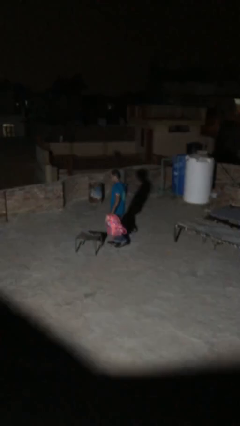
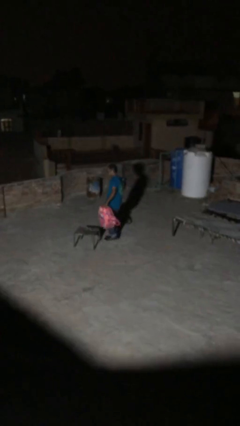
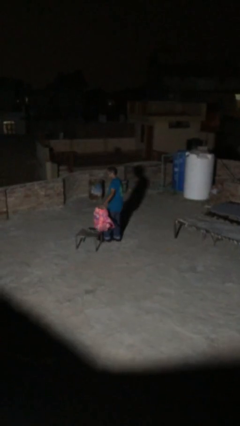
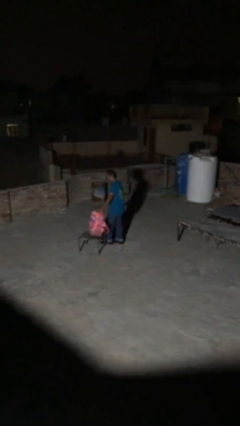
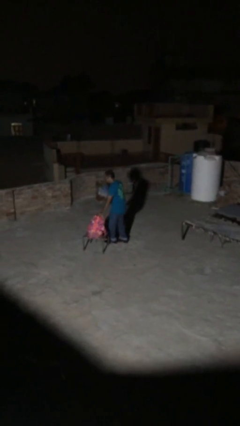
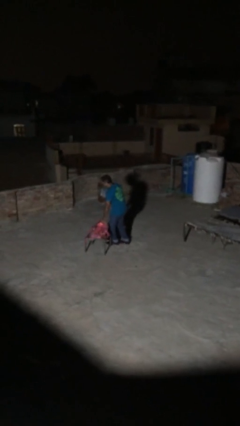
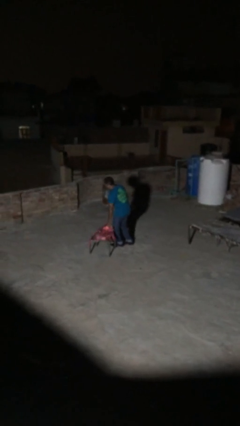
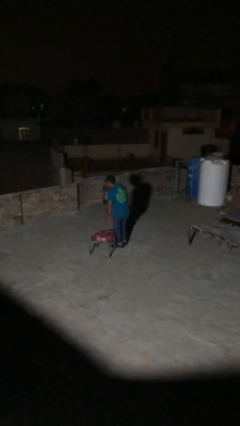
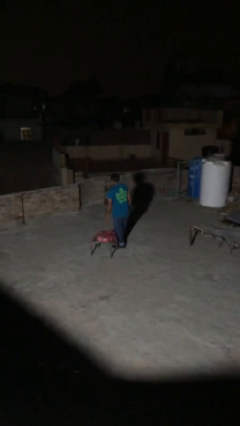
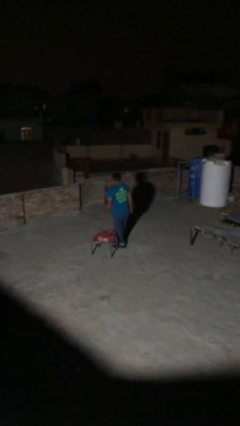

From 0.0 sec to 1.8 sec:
person puts down object on table

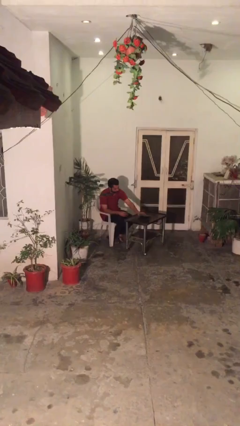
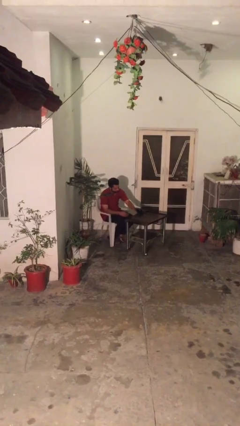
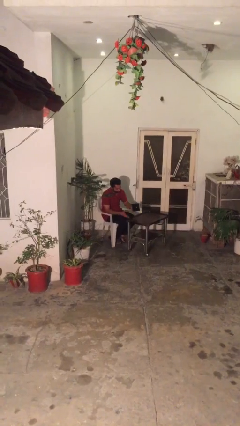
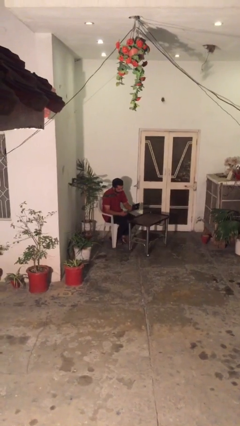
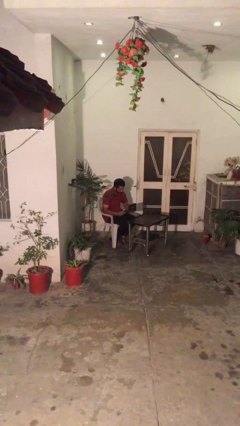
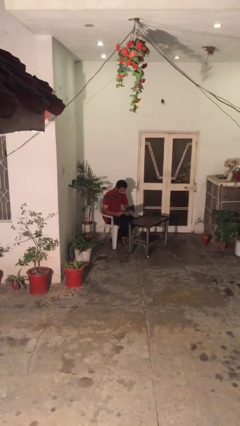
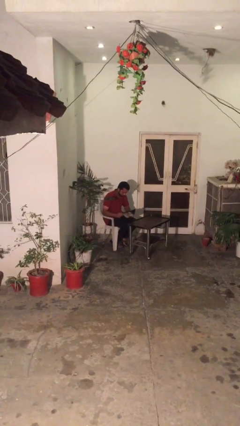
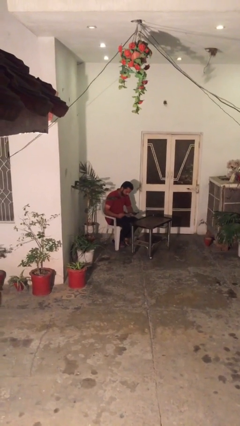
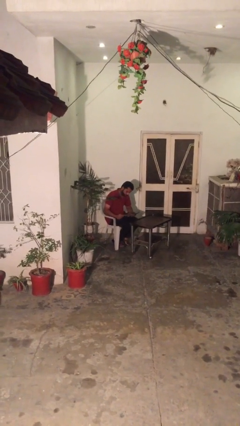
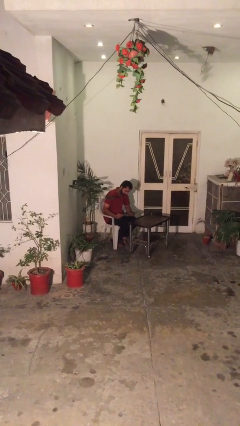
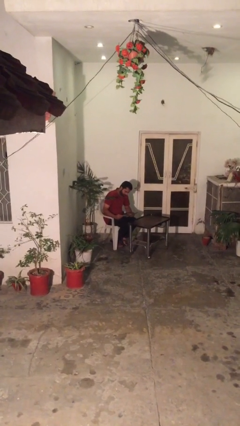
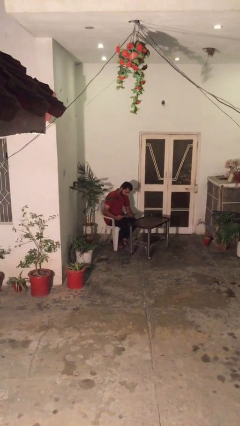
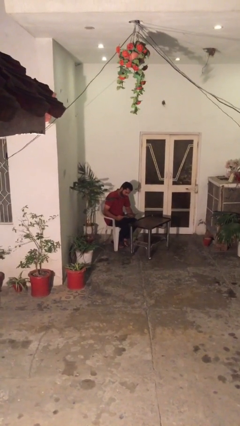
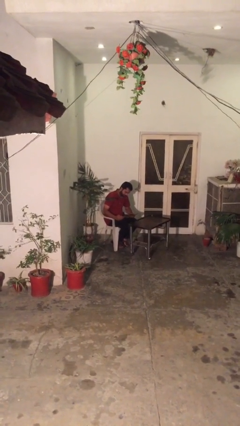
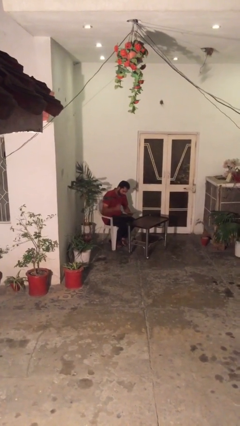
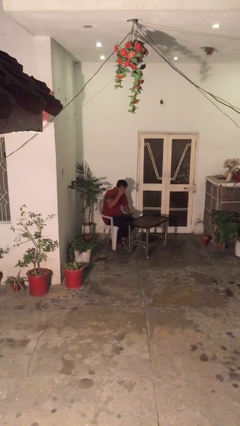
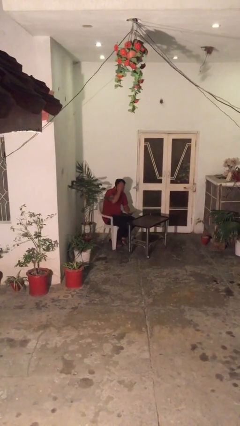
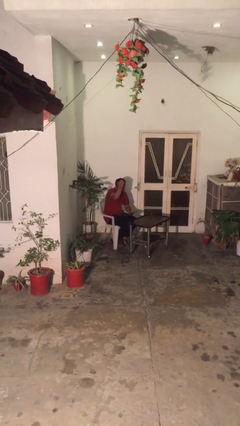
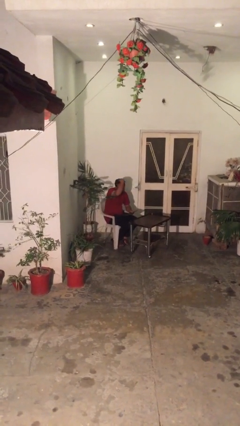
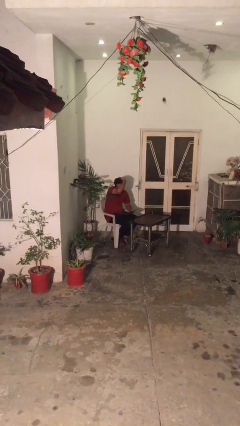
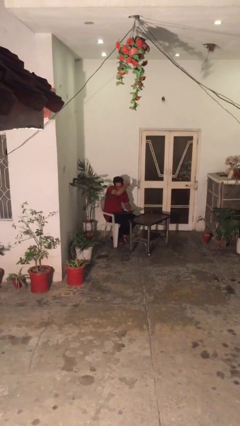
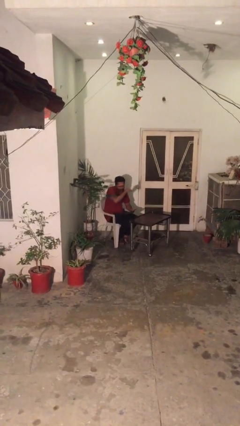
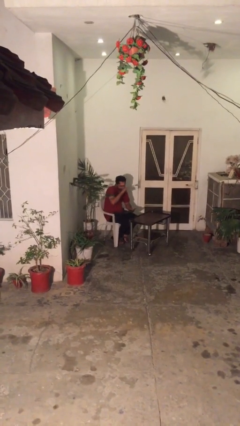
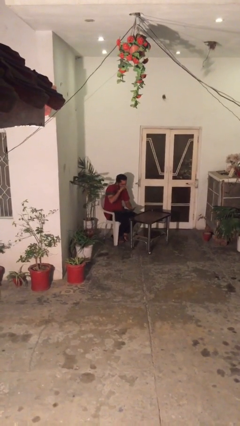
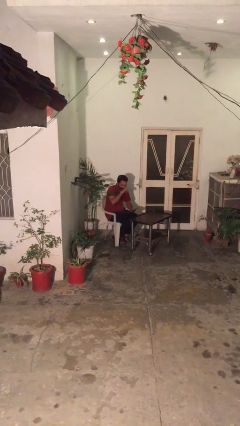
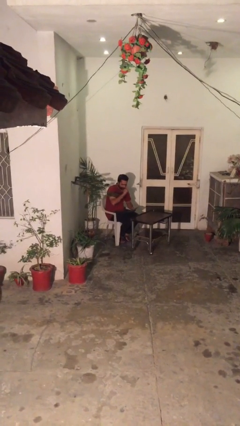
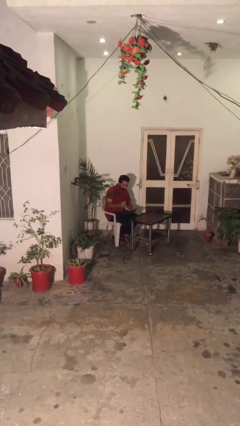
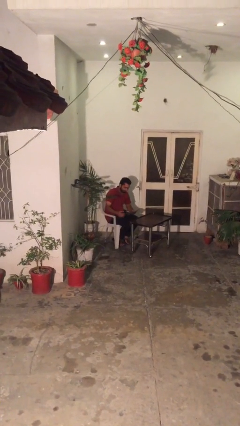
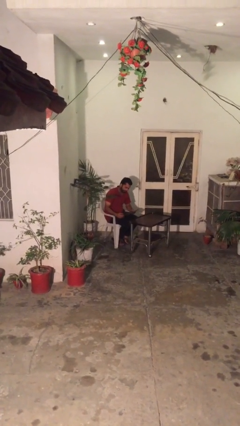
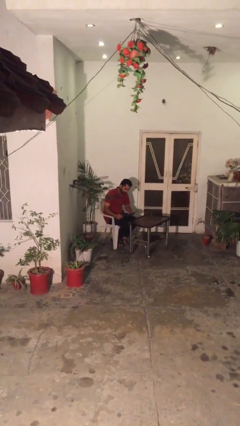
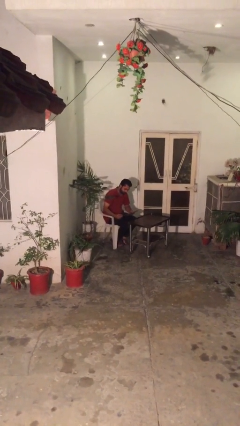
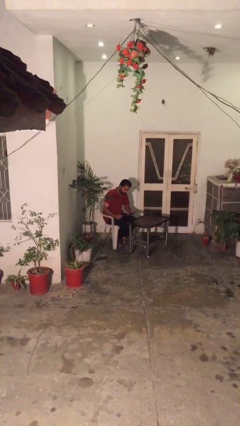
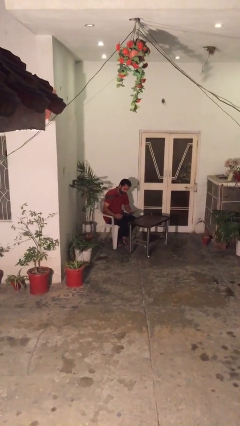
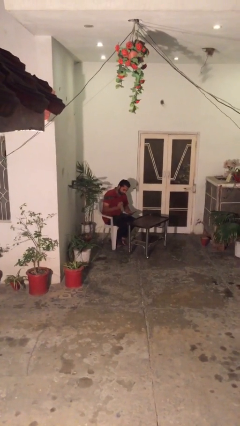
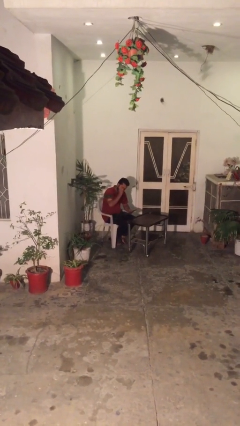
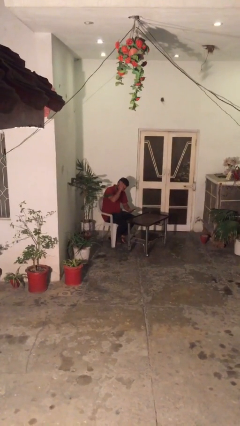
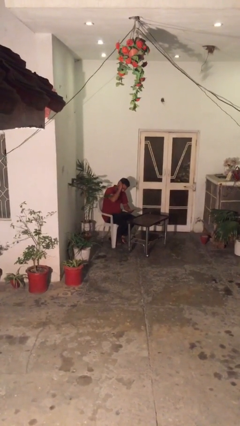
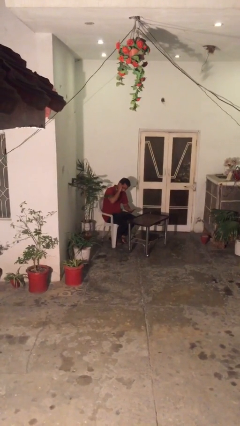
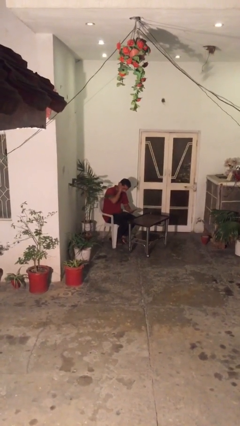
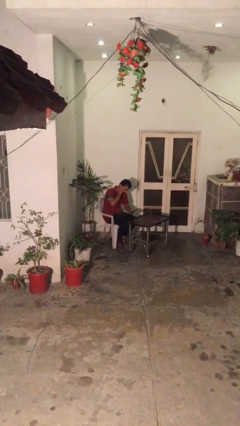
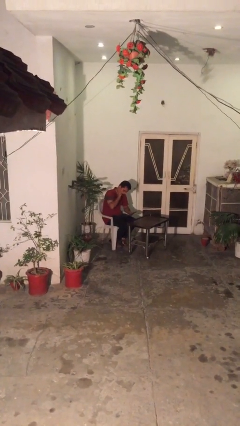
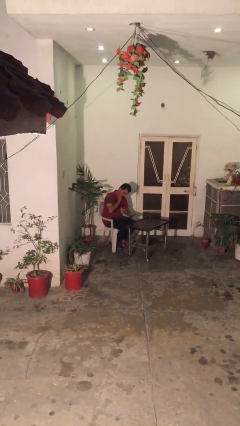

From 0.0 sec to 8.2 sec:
person reads document

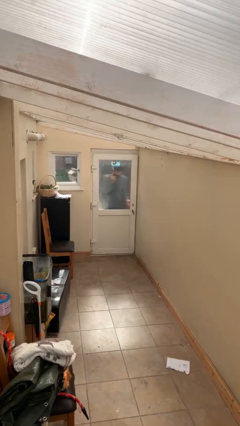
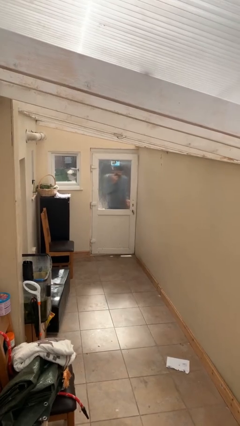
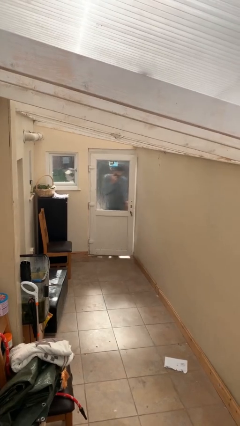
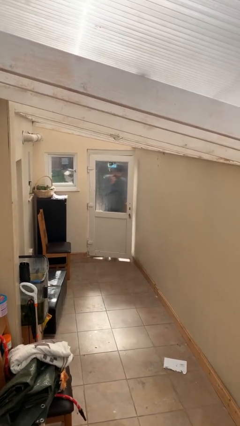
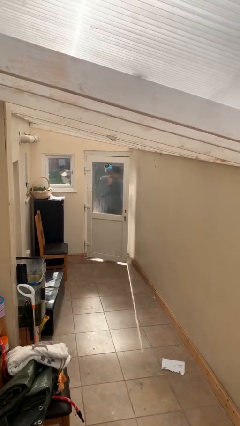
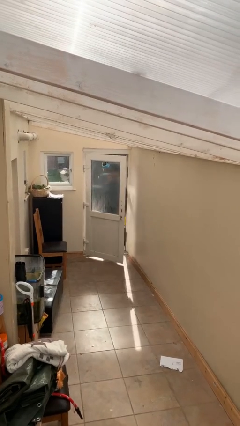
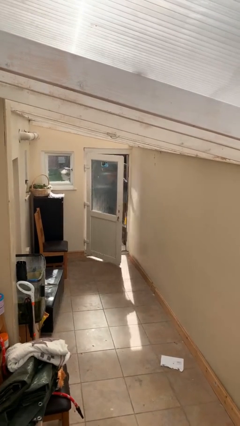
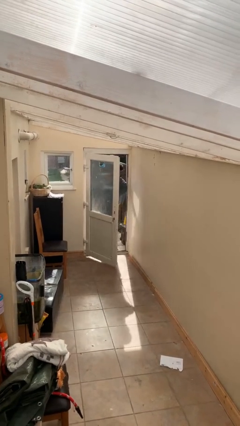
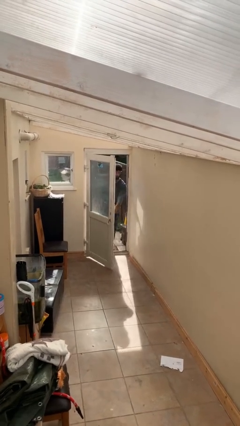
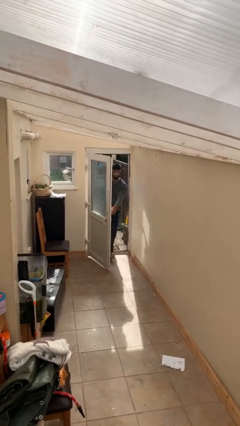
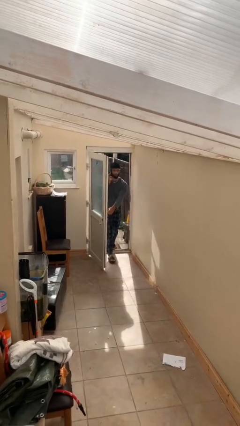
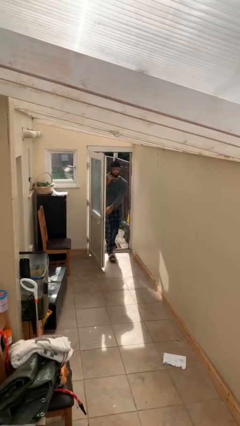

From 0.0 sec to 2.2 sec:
person opens facility door

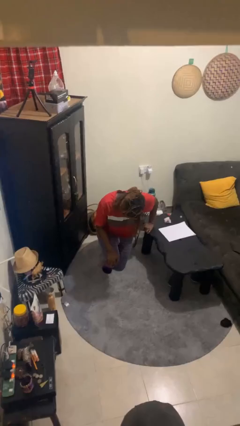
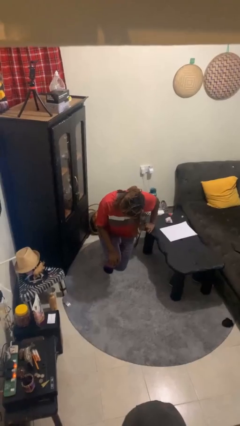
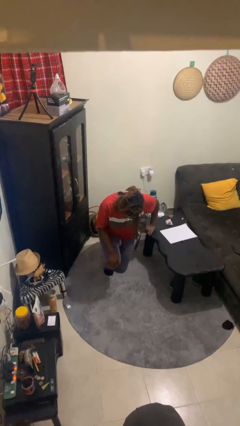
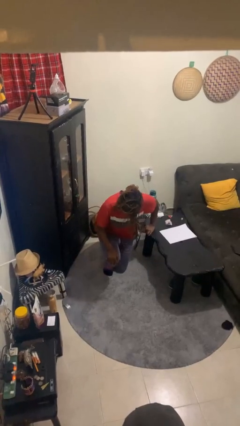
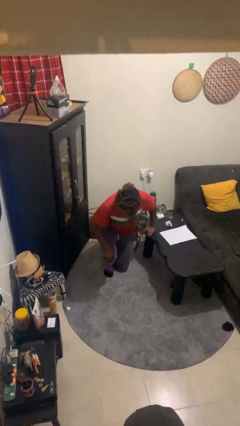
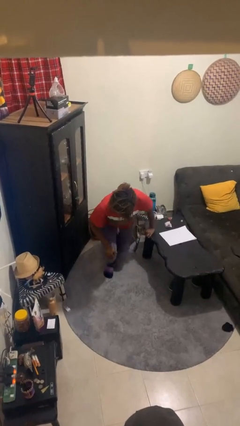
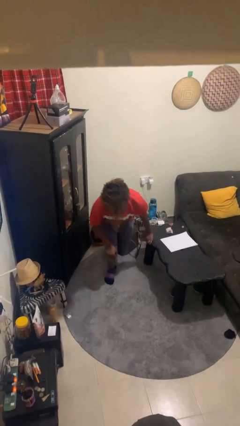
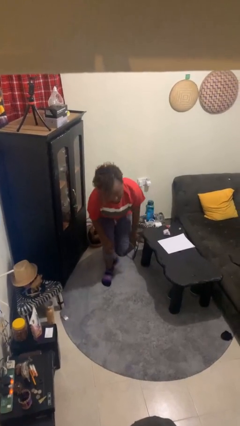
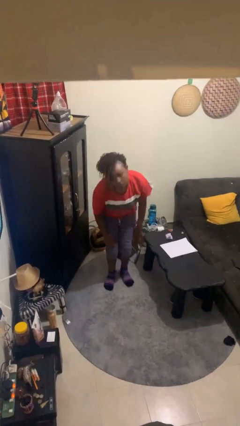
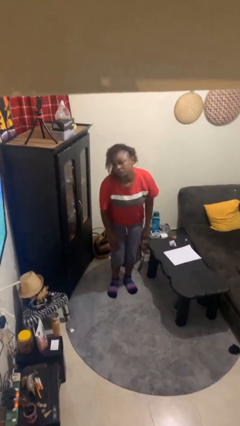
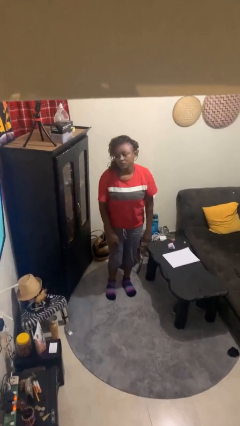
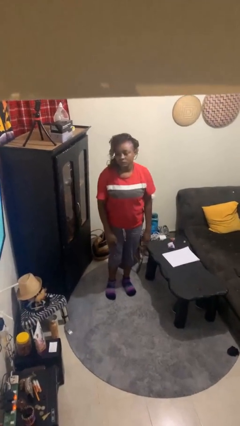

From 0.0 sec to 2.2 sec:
person stands up from floor

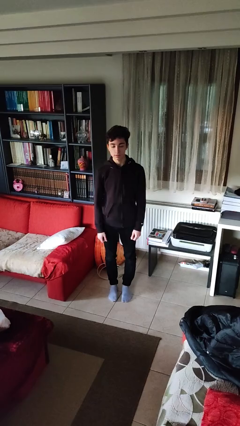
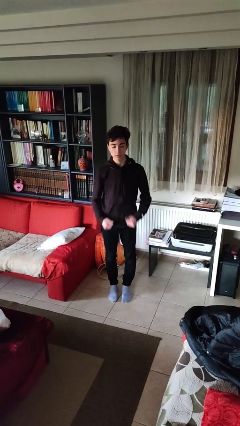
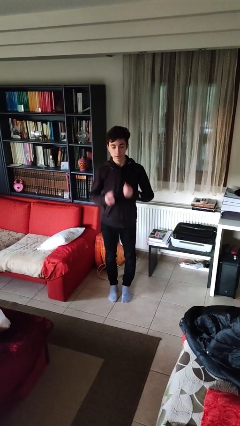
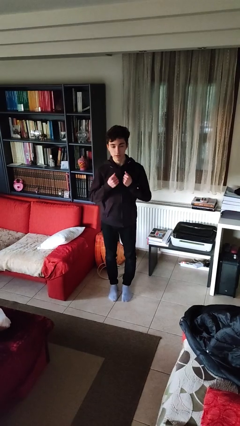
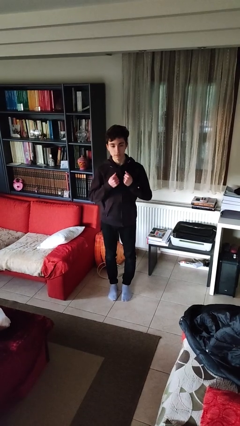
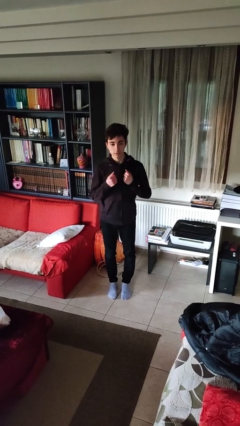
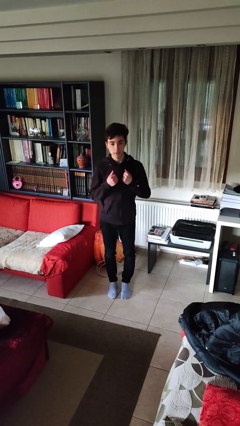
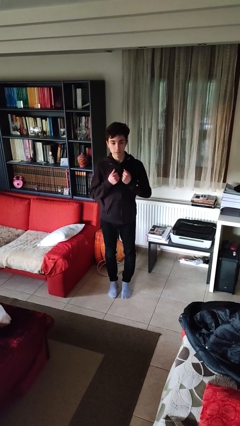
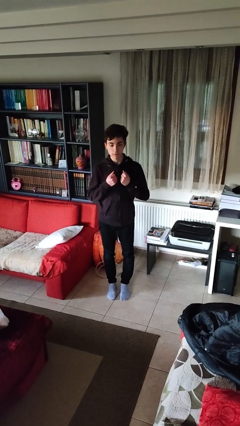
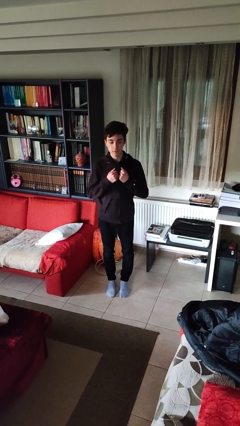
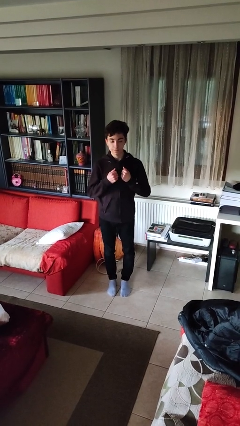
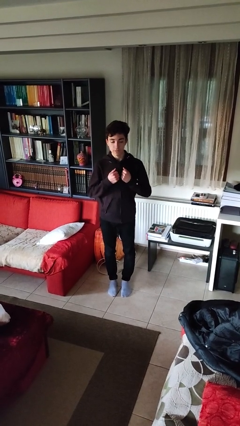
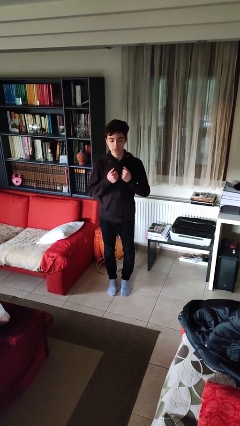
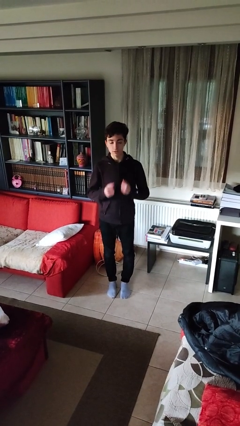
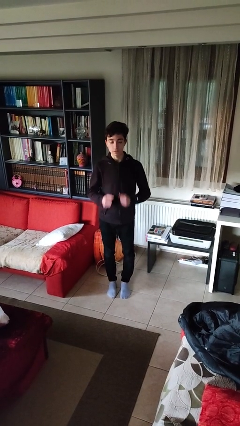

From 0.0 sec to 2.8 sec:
person drums on chest

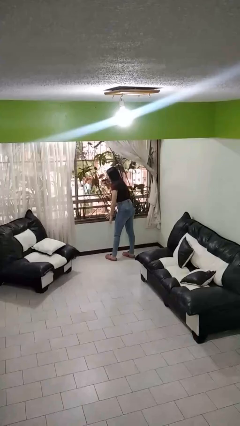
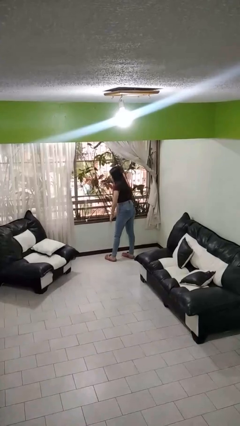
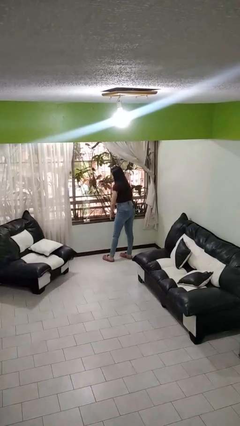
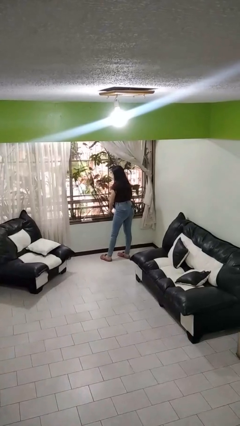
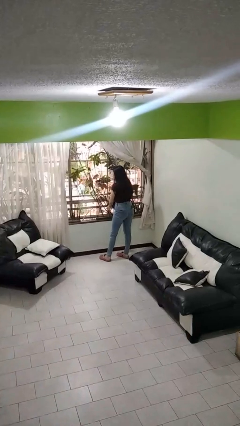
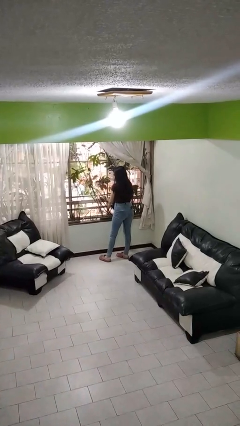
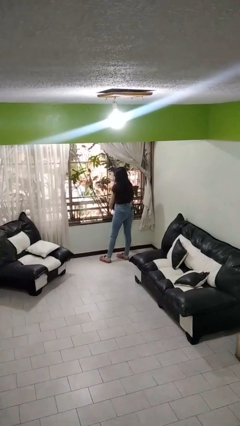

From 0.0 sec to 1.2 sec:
person opens home window
